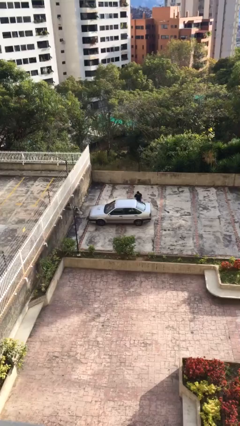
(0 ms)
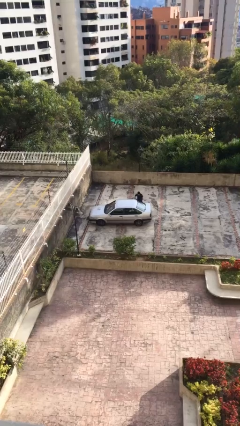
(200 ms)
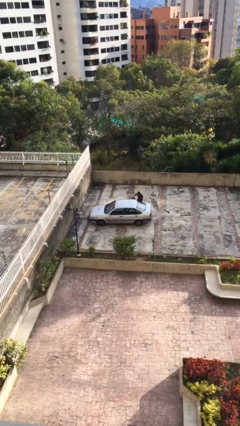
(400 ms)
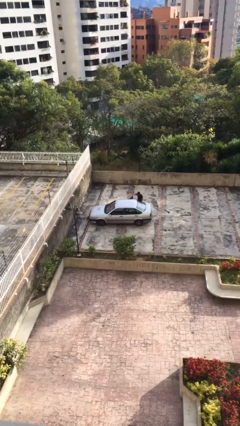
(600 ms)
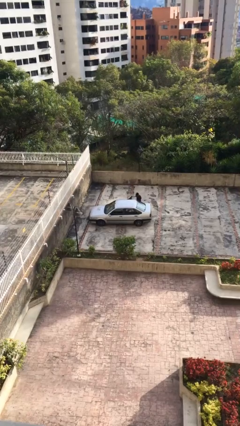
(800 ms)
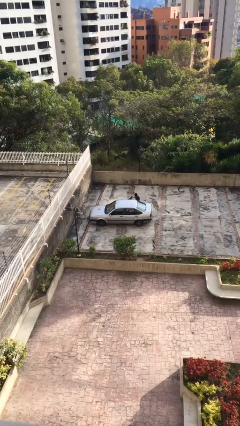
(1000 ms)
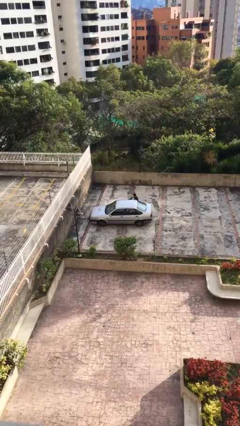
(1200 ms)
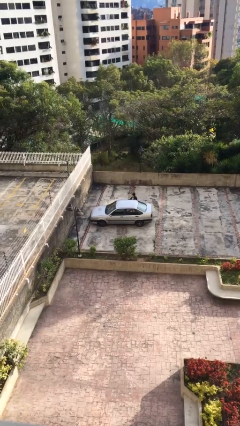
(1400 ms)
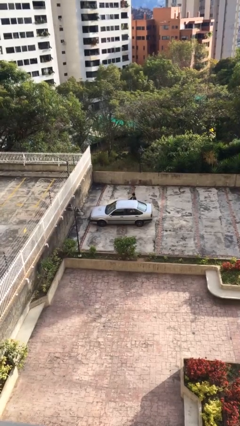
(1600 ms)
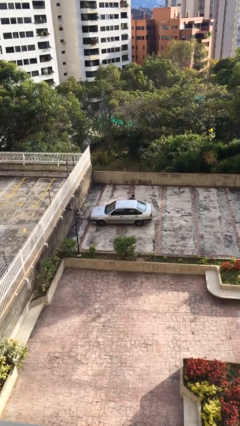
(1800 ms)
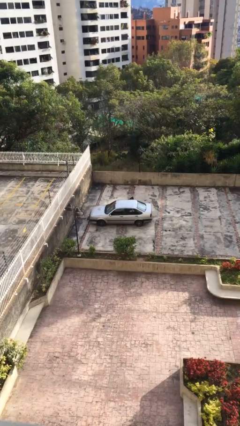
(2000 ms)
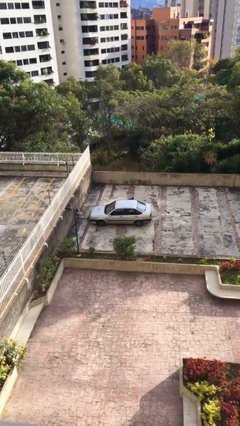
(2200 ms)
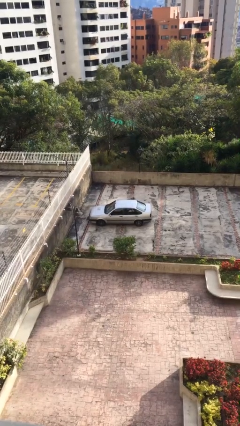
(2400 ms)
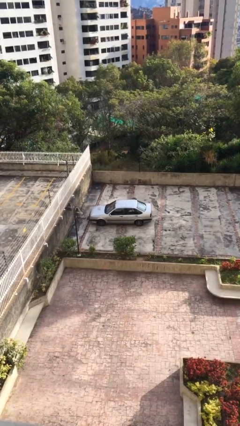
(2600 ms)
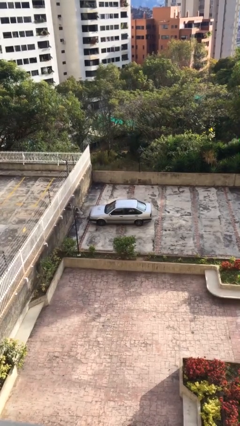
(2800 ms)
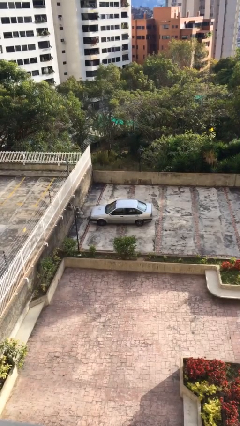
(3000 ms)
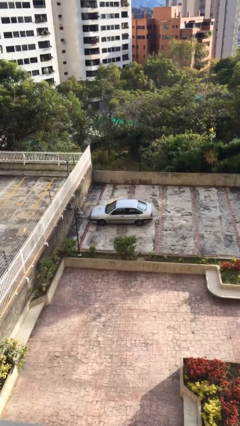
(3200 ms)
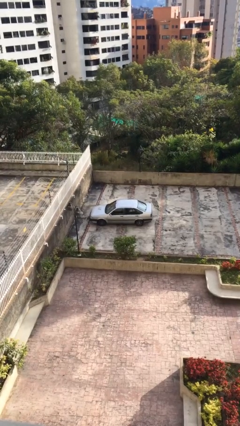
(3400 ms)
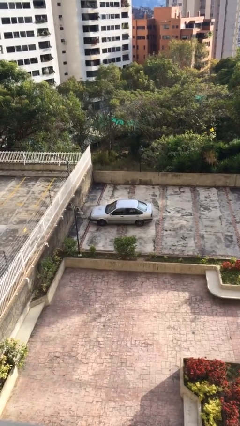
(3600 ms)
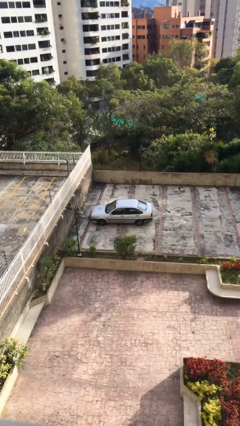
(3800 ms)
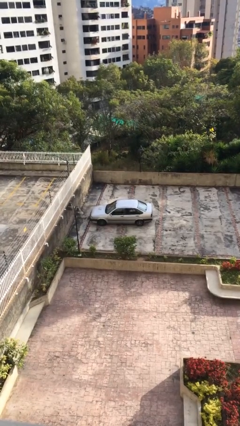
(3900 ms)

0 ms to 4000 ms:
car picks up person

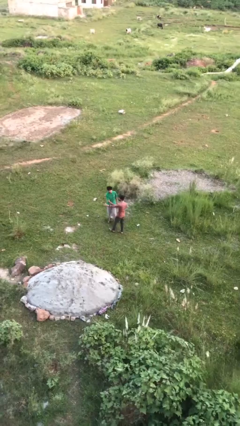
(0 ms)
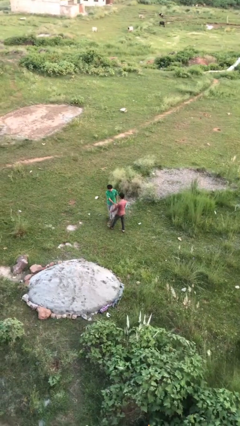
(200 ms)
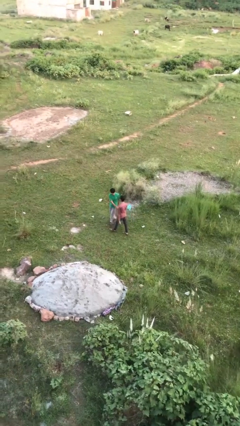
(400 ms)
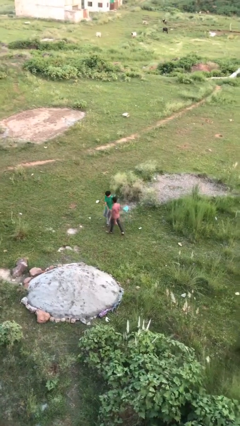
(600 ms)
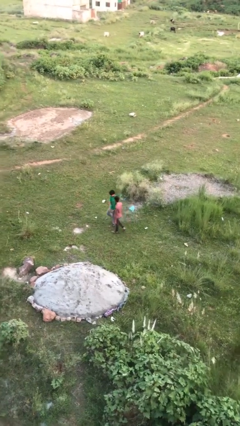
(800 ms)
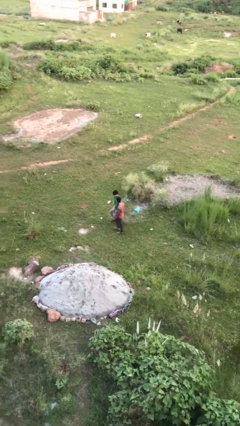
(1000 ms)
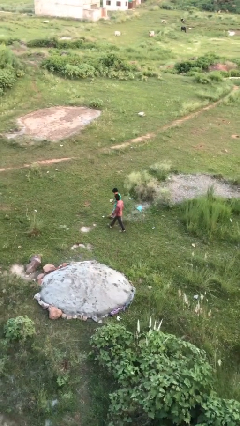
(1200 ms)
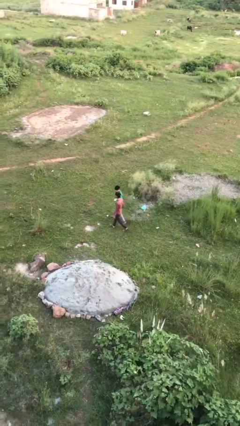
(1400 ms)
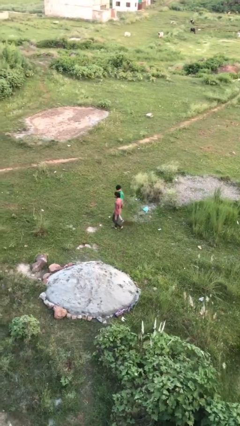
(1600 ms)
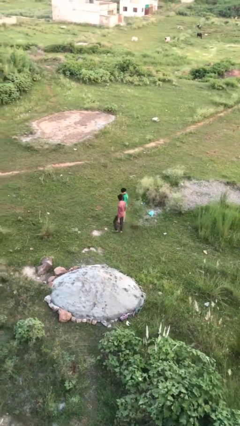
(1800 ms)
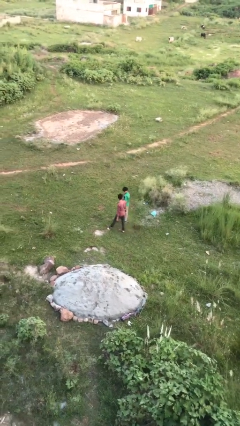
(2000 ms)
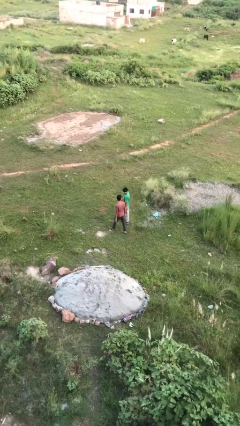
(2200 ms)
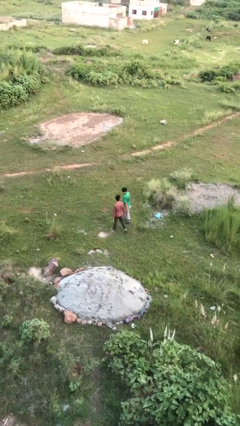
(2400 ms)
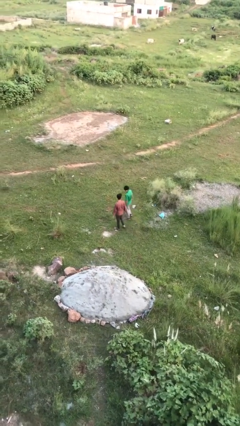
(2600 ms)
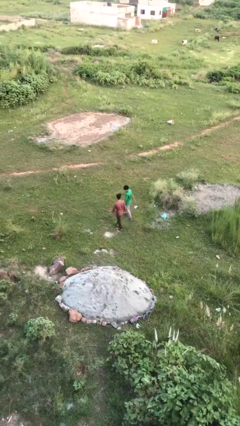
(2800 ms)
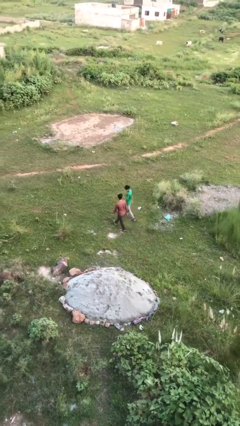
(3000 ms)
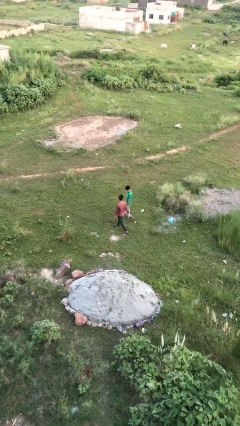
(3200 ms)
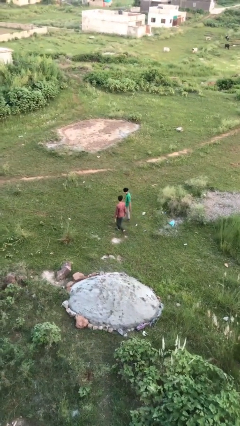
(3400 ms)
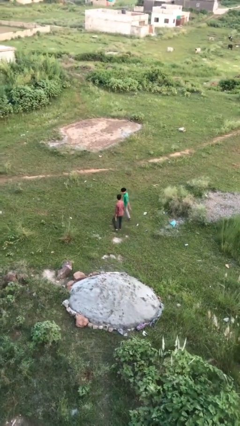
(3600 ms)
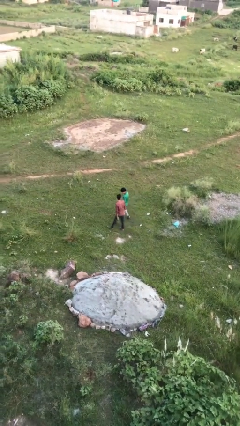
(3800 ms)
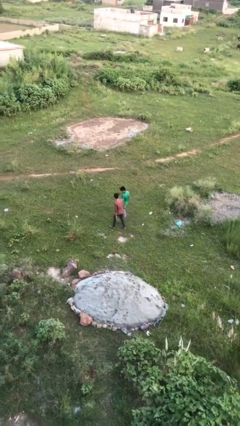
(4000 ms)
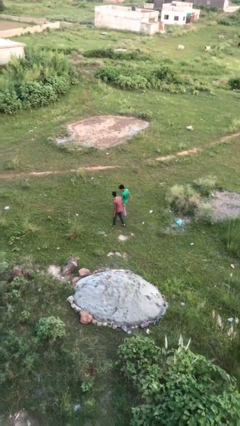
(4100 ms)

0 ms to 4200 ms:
person talks to person

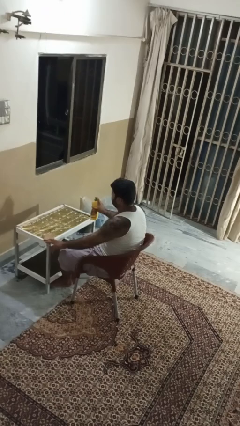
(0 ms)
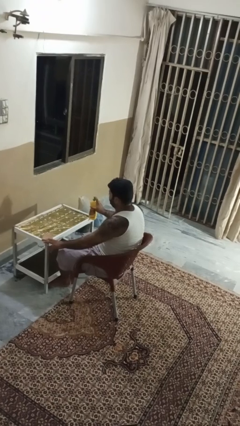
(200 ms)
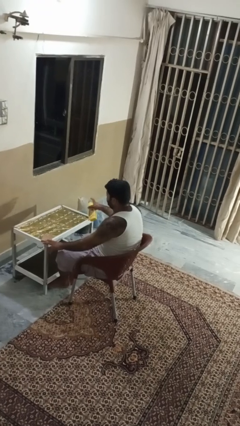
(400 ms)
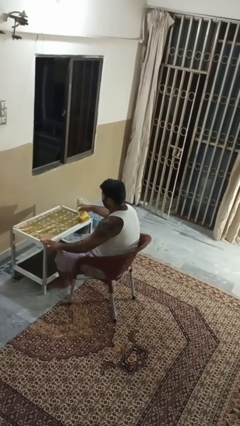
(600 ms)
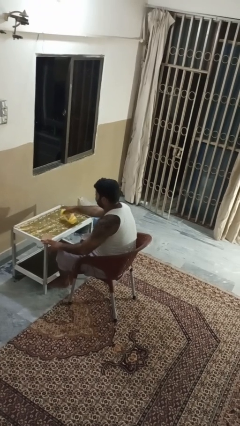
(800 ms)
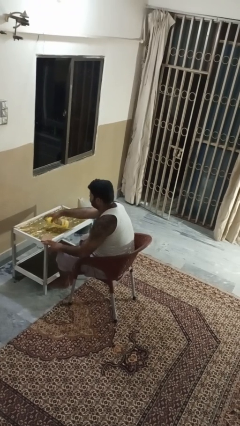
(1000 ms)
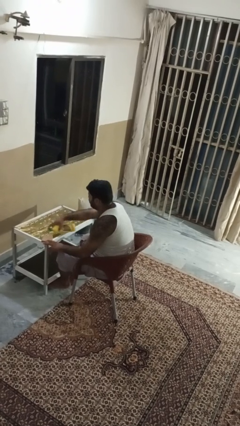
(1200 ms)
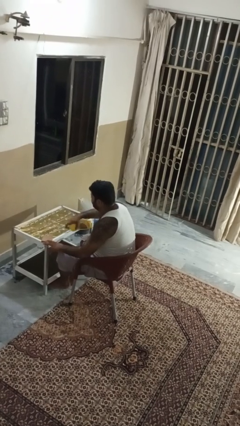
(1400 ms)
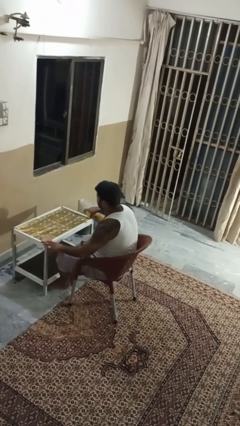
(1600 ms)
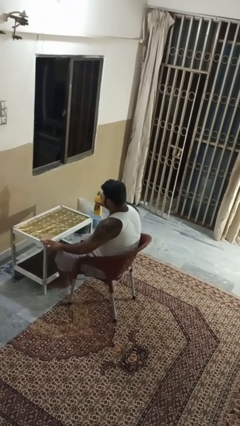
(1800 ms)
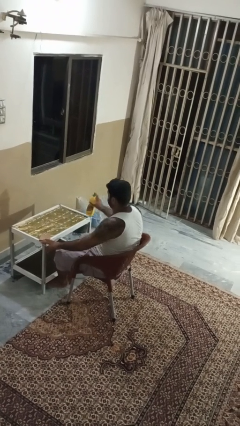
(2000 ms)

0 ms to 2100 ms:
person sprays from bottle

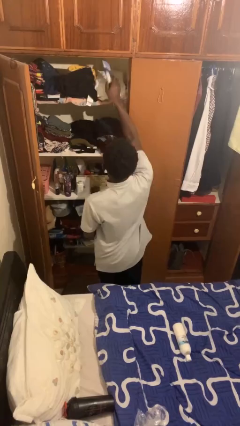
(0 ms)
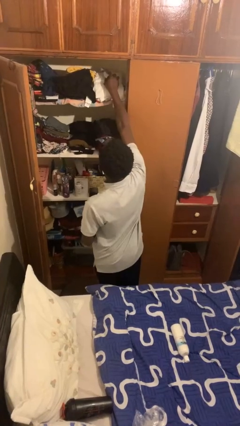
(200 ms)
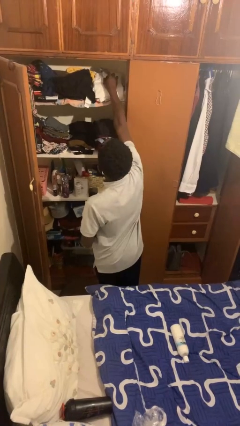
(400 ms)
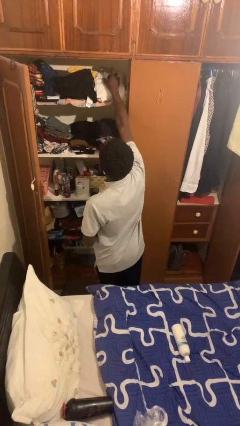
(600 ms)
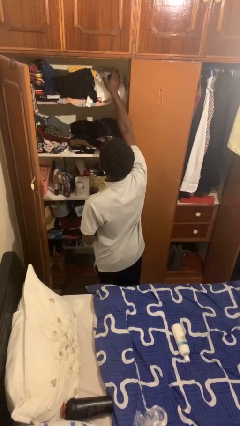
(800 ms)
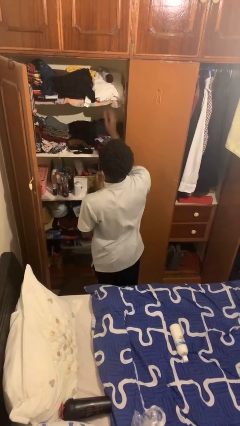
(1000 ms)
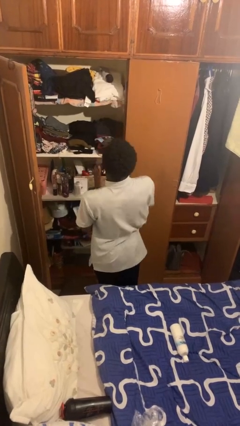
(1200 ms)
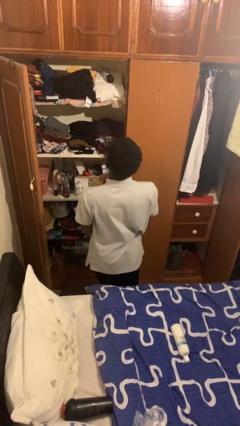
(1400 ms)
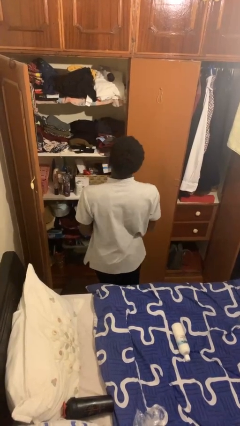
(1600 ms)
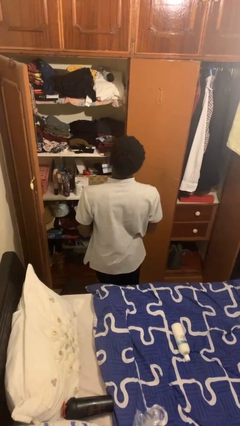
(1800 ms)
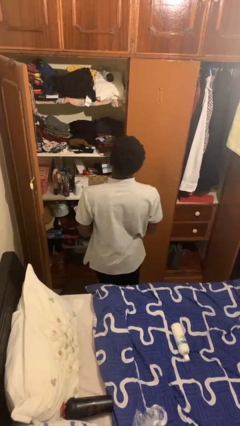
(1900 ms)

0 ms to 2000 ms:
person puts down object on shelf

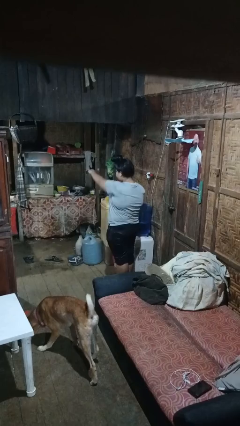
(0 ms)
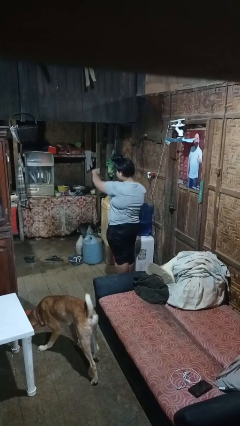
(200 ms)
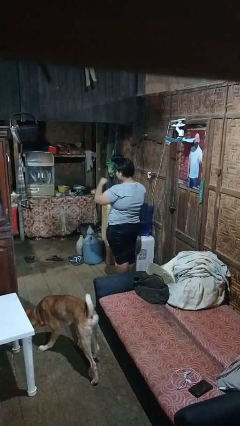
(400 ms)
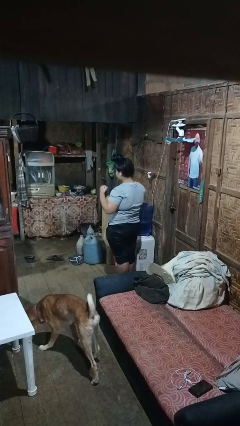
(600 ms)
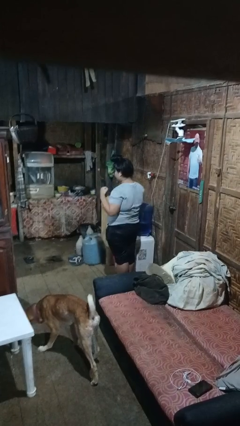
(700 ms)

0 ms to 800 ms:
person punches

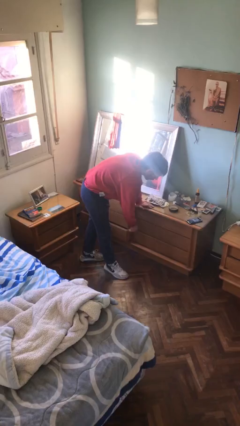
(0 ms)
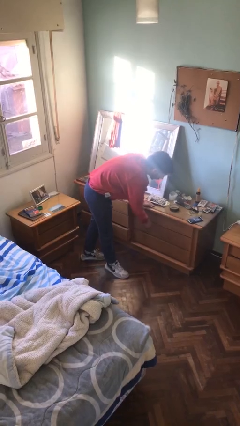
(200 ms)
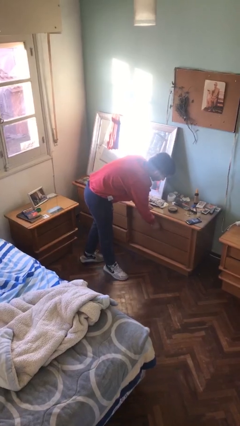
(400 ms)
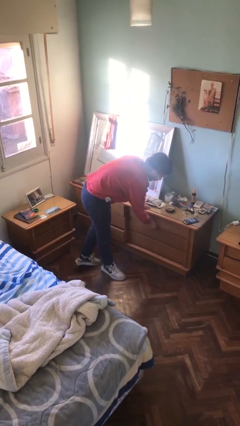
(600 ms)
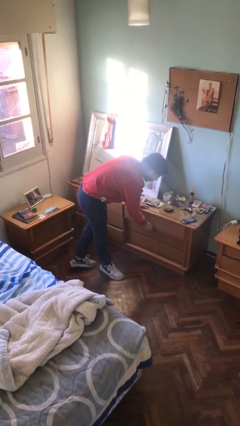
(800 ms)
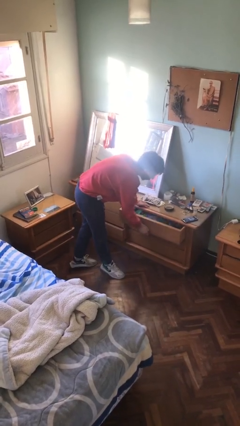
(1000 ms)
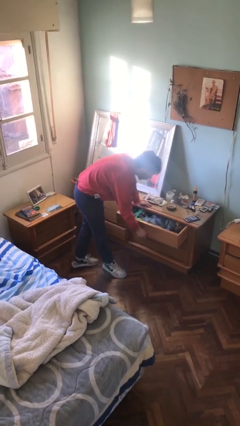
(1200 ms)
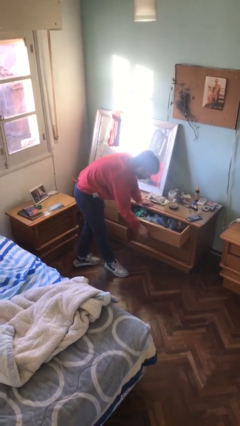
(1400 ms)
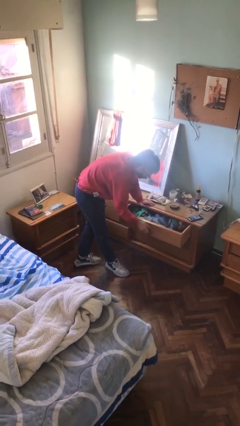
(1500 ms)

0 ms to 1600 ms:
person opens dresser drawer

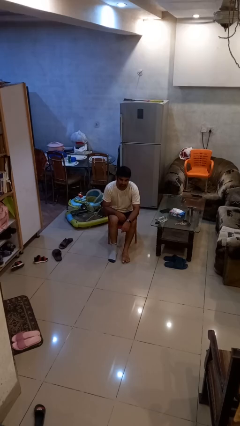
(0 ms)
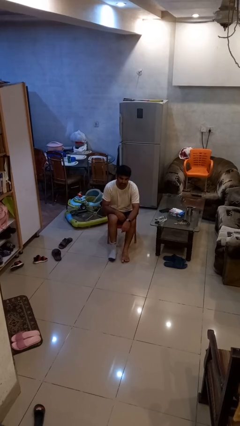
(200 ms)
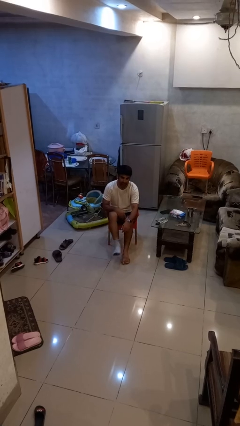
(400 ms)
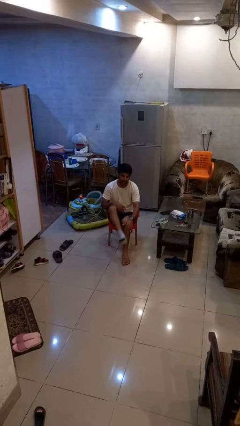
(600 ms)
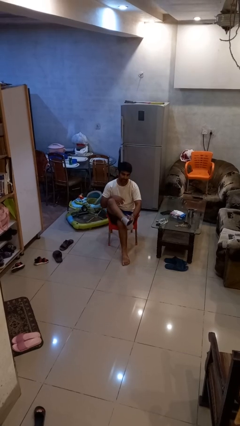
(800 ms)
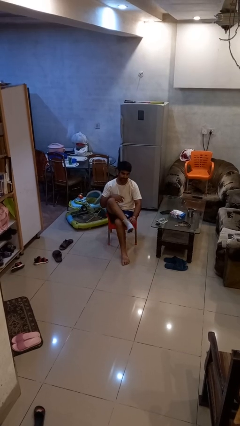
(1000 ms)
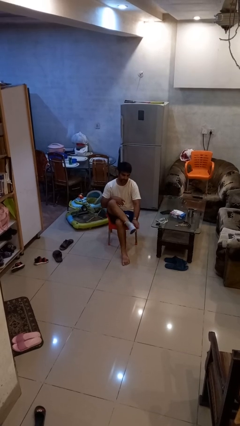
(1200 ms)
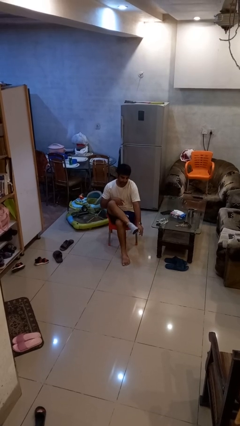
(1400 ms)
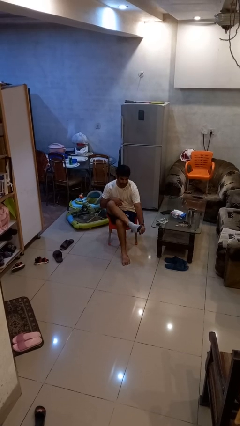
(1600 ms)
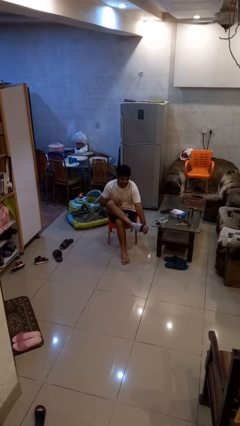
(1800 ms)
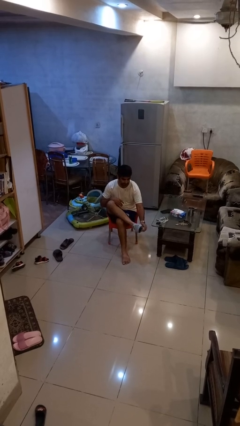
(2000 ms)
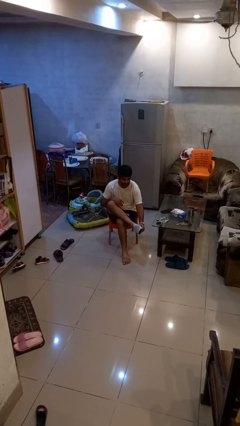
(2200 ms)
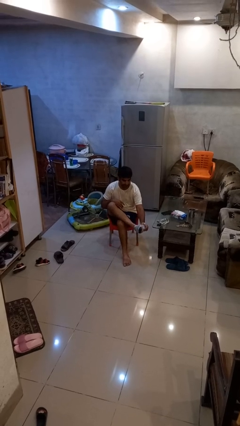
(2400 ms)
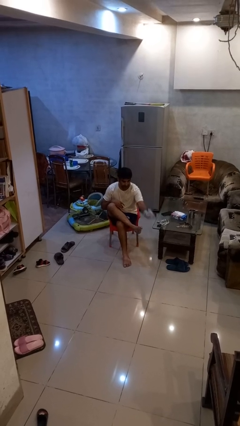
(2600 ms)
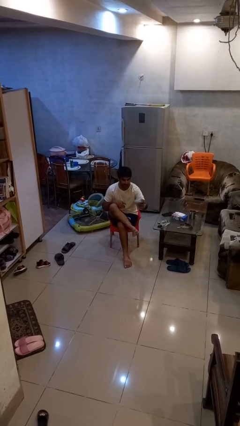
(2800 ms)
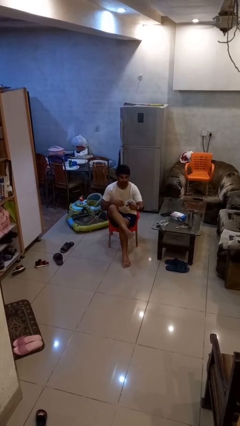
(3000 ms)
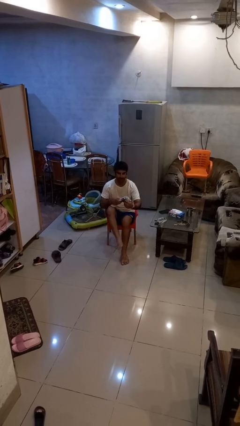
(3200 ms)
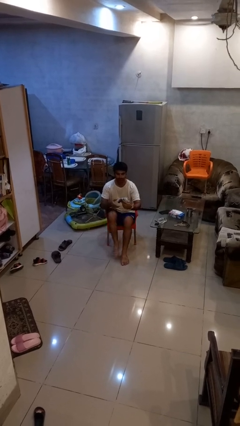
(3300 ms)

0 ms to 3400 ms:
person takes off socks
